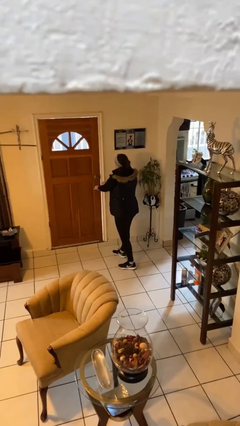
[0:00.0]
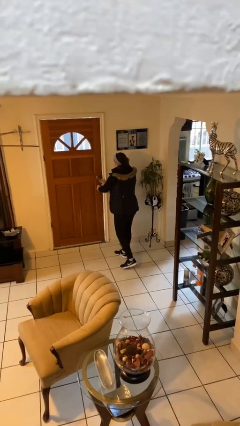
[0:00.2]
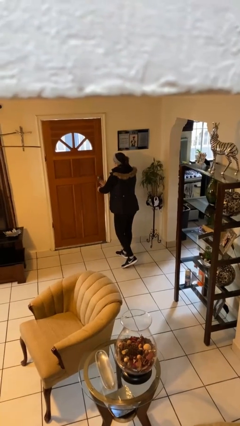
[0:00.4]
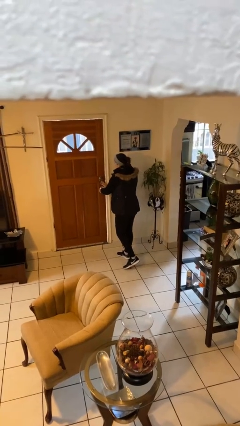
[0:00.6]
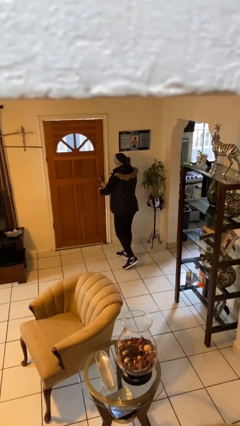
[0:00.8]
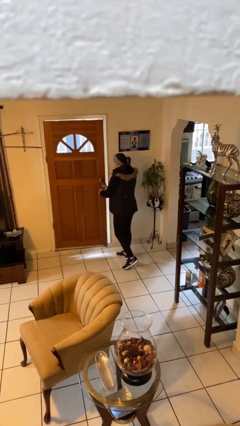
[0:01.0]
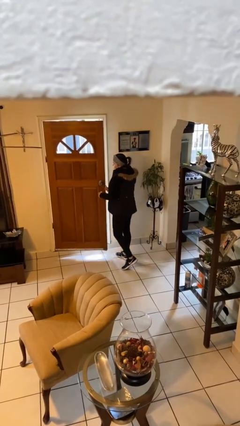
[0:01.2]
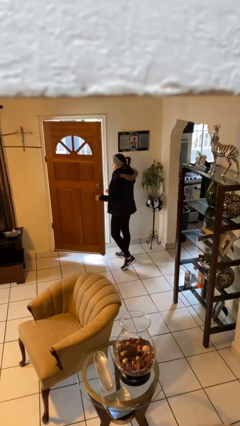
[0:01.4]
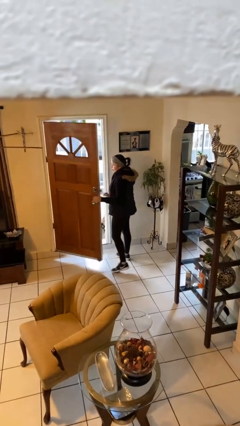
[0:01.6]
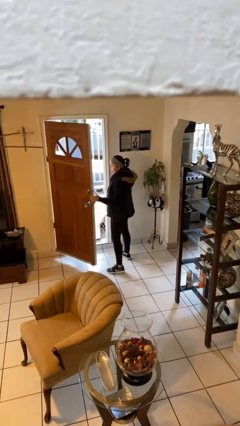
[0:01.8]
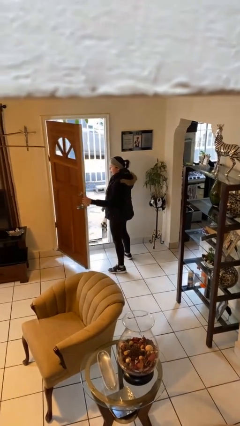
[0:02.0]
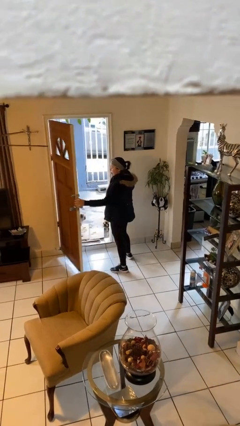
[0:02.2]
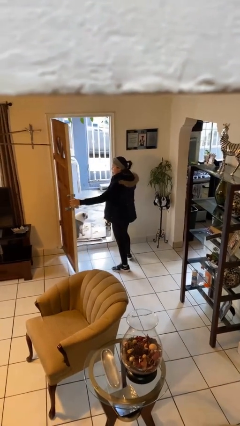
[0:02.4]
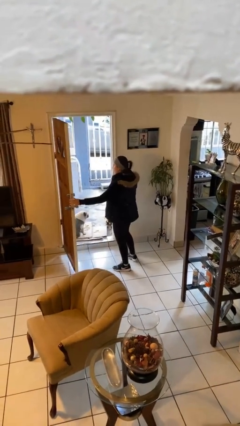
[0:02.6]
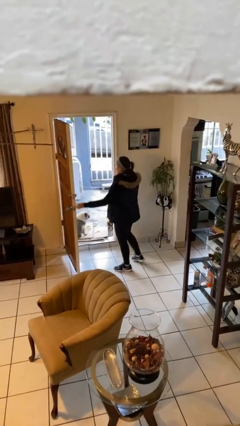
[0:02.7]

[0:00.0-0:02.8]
person opens facility door

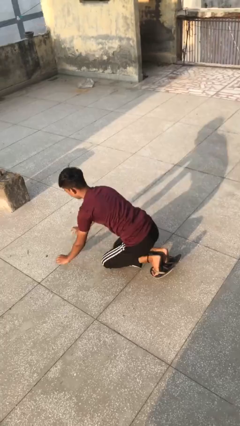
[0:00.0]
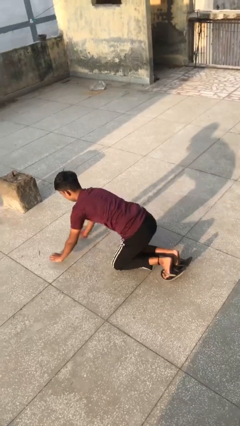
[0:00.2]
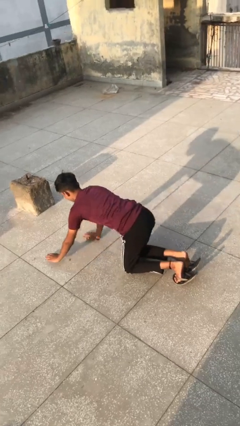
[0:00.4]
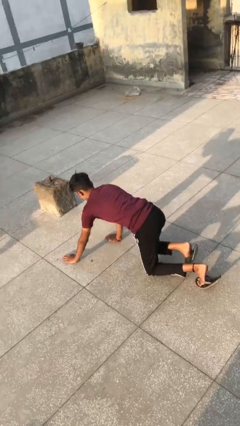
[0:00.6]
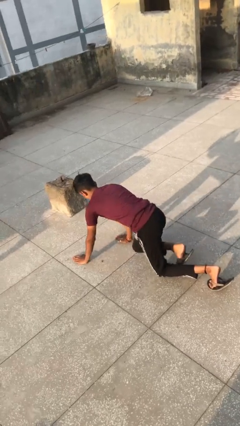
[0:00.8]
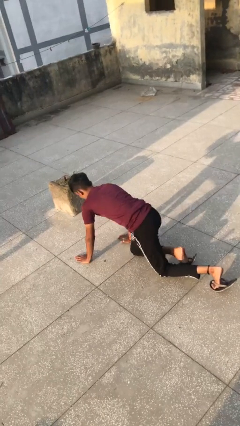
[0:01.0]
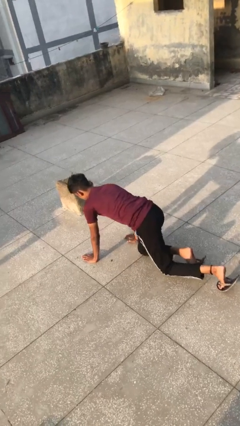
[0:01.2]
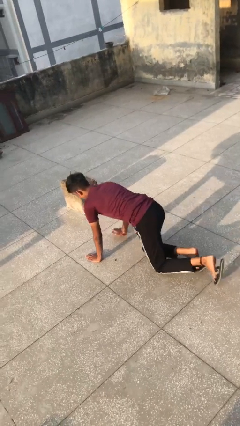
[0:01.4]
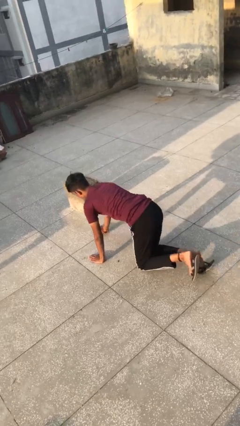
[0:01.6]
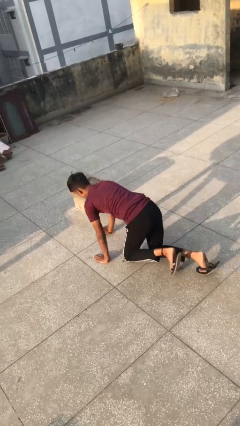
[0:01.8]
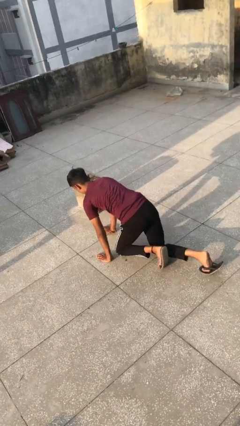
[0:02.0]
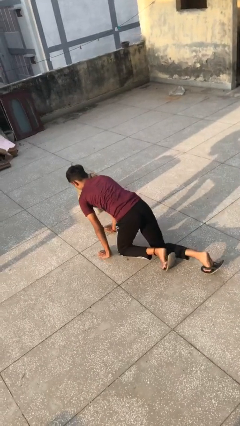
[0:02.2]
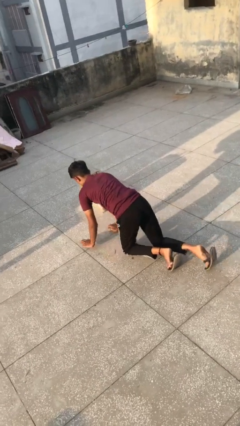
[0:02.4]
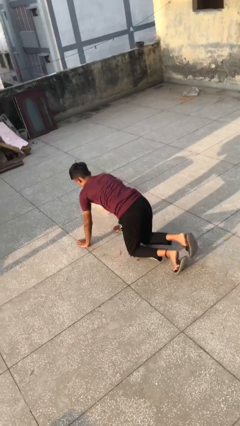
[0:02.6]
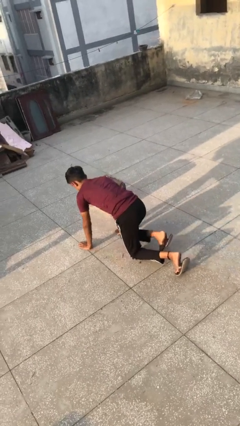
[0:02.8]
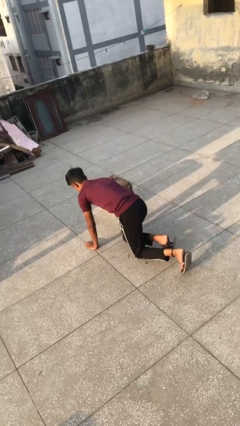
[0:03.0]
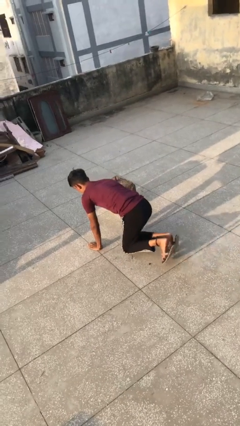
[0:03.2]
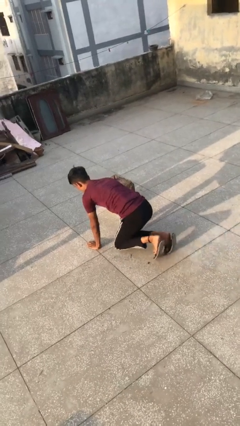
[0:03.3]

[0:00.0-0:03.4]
person crawls

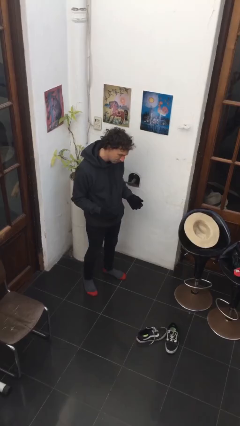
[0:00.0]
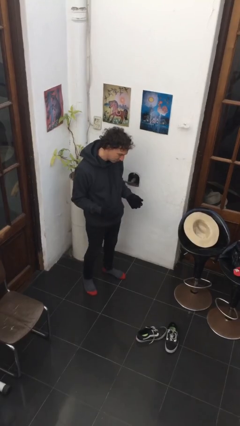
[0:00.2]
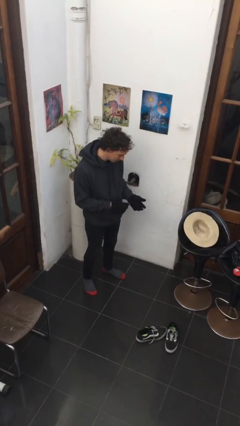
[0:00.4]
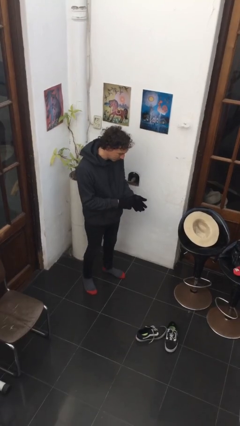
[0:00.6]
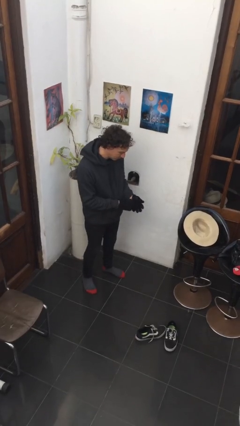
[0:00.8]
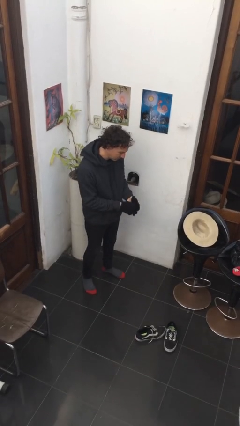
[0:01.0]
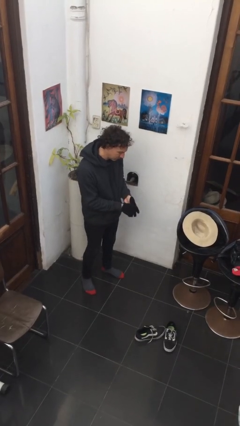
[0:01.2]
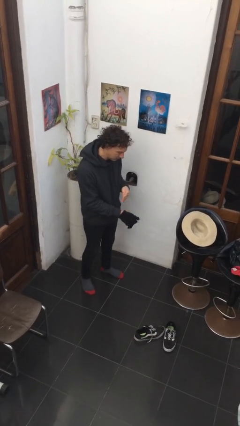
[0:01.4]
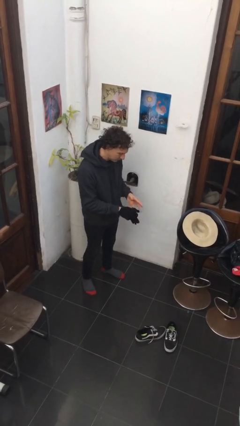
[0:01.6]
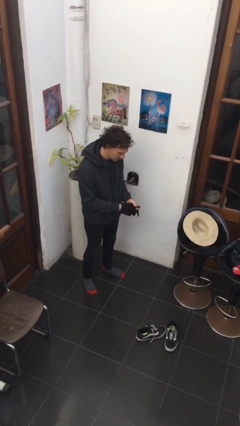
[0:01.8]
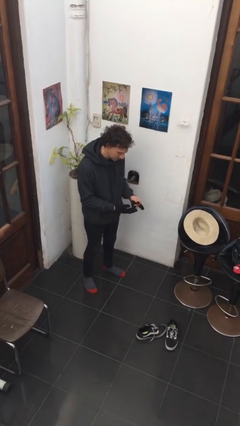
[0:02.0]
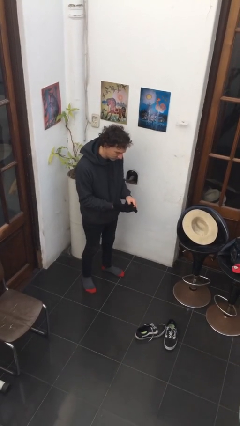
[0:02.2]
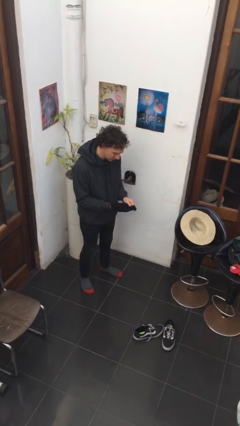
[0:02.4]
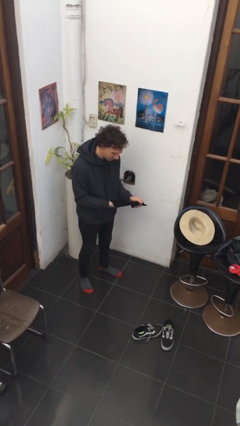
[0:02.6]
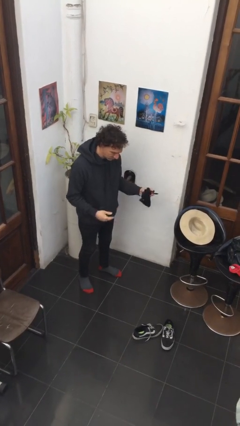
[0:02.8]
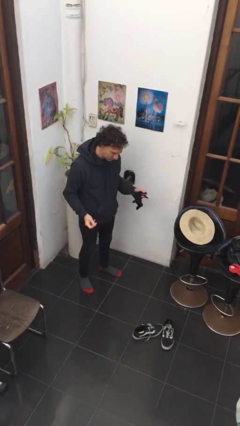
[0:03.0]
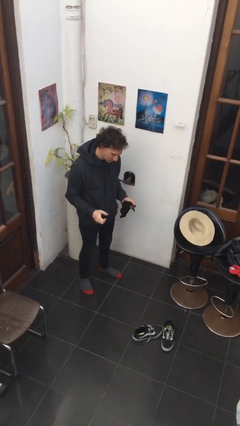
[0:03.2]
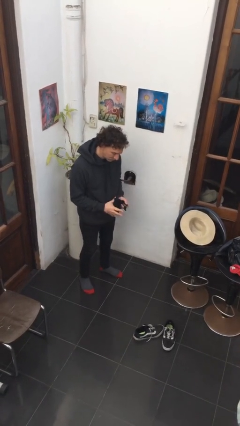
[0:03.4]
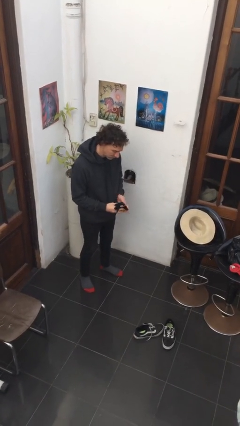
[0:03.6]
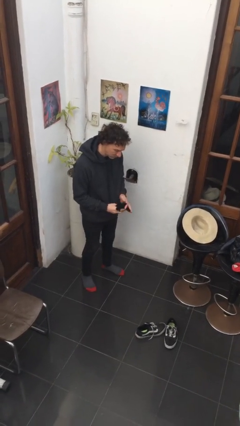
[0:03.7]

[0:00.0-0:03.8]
person takes off gloves

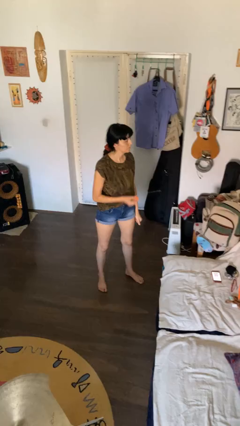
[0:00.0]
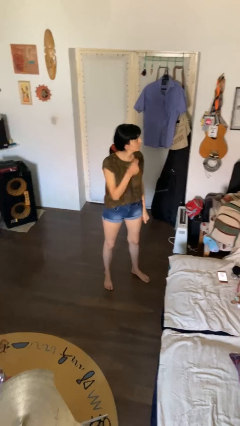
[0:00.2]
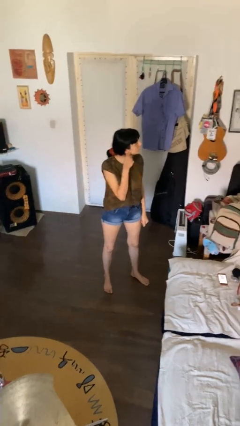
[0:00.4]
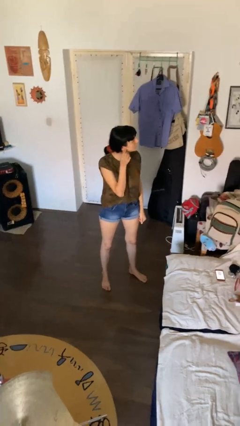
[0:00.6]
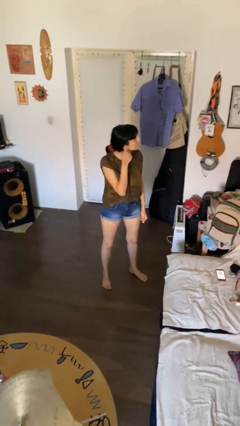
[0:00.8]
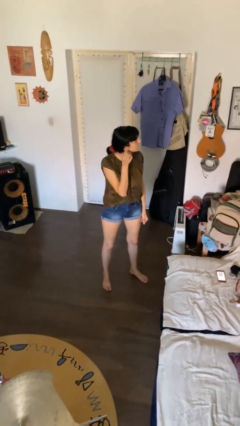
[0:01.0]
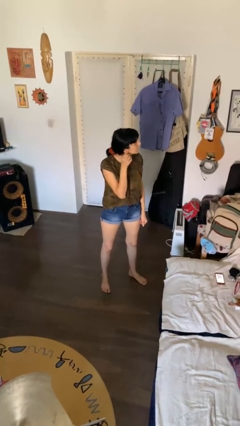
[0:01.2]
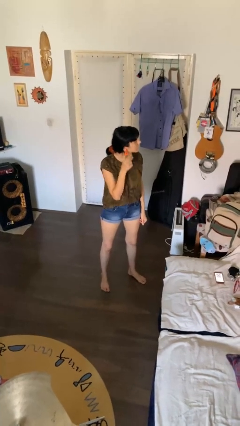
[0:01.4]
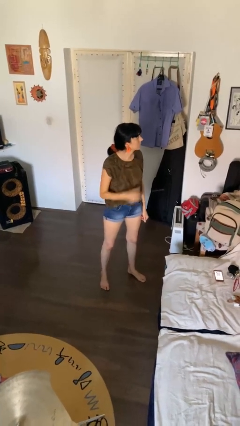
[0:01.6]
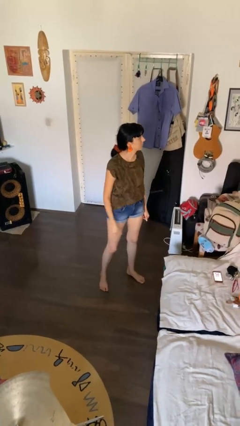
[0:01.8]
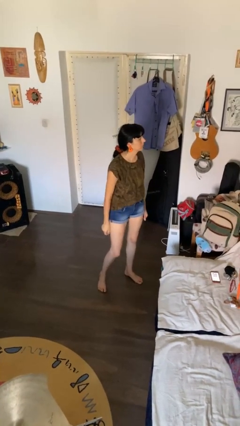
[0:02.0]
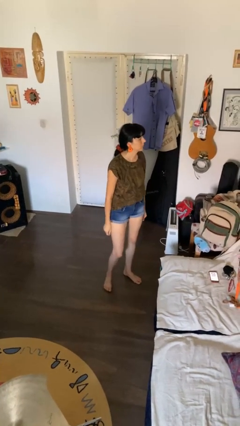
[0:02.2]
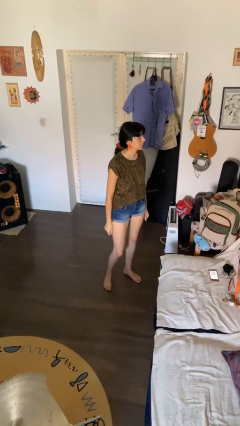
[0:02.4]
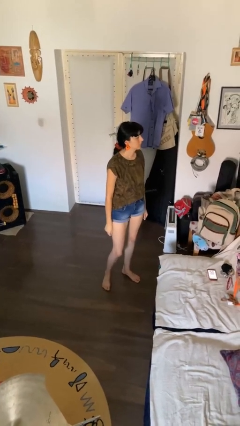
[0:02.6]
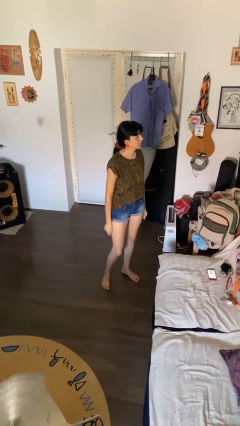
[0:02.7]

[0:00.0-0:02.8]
person puts on earrings

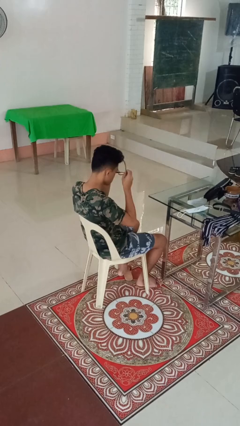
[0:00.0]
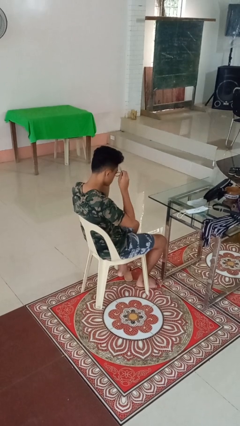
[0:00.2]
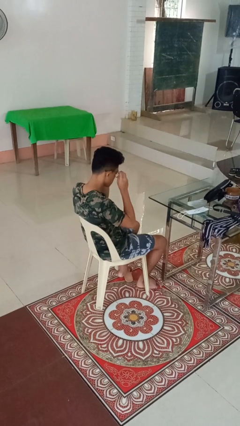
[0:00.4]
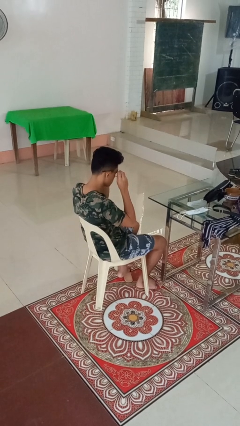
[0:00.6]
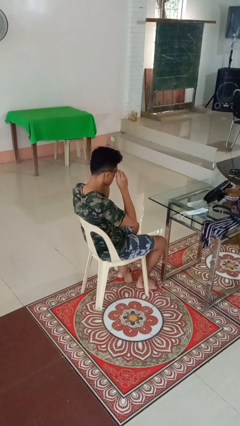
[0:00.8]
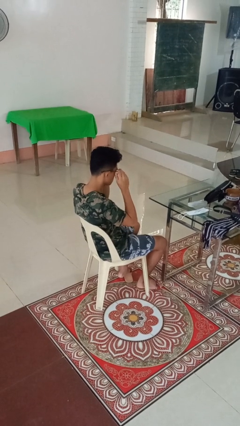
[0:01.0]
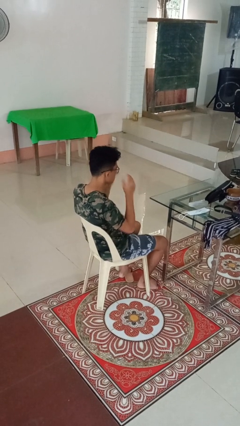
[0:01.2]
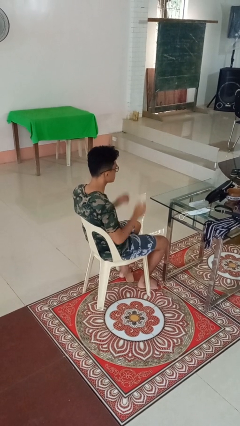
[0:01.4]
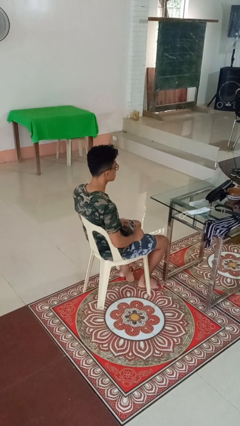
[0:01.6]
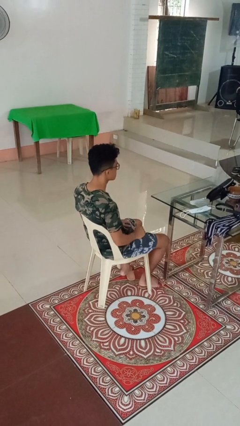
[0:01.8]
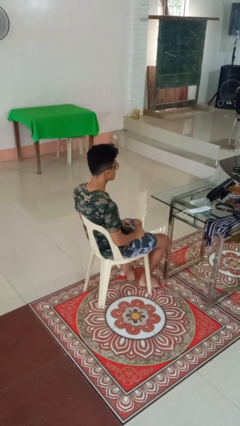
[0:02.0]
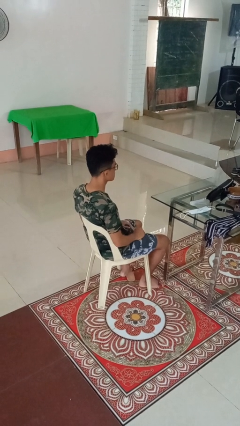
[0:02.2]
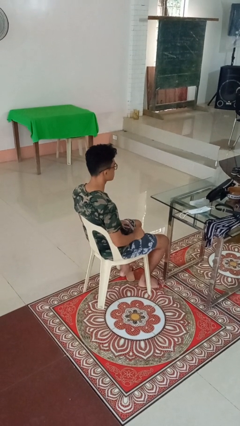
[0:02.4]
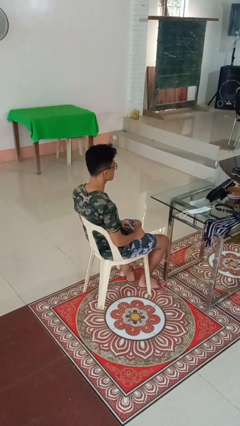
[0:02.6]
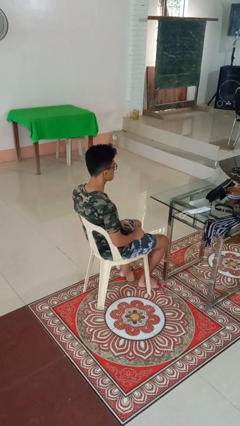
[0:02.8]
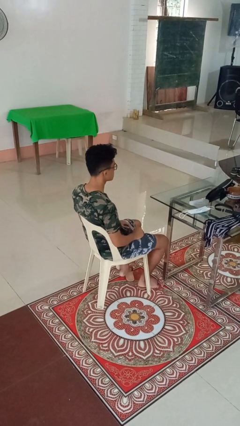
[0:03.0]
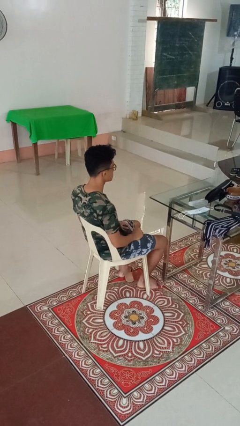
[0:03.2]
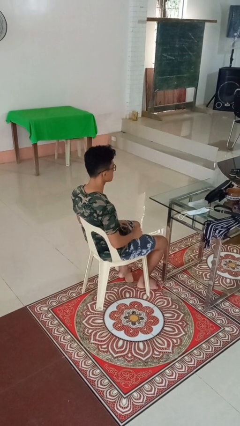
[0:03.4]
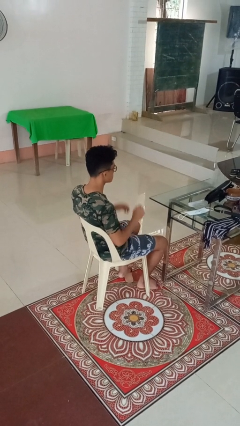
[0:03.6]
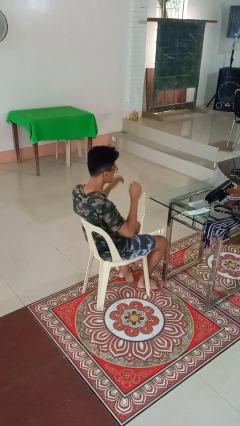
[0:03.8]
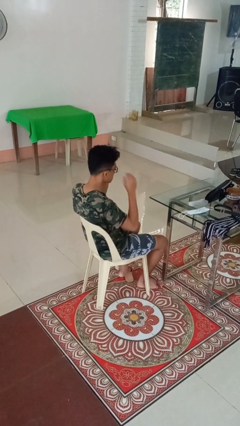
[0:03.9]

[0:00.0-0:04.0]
person puts on glasses

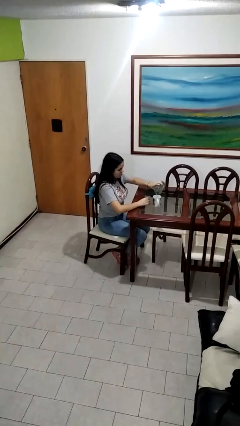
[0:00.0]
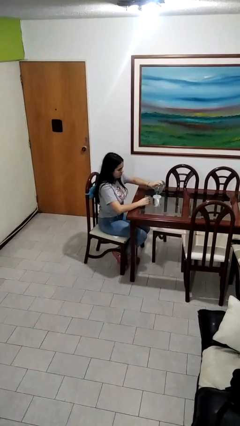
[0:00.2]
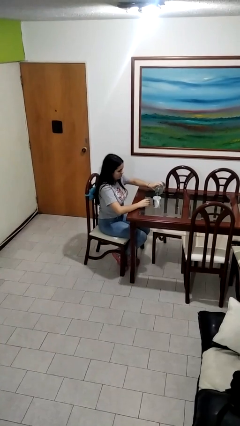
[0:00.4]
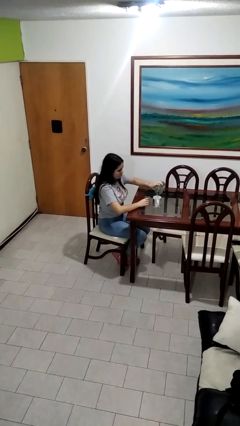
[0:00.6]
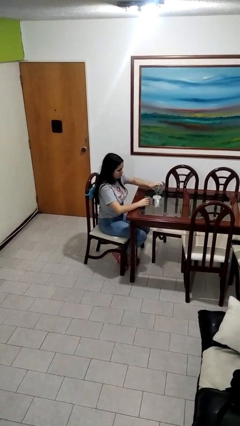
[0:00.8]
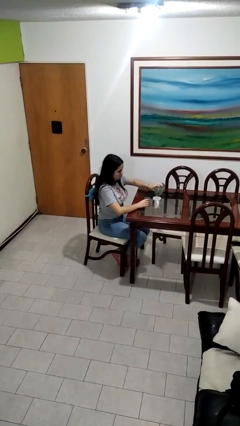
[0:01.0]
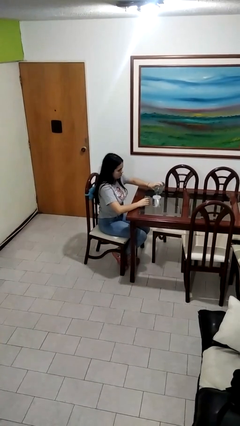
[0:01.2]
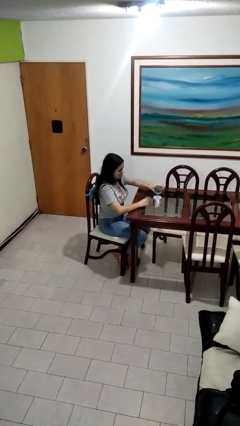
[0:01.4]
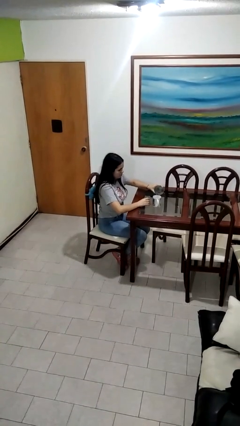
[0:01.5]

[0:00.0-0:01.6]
person pours liquid into cup
